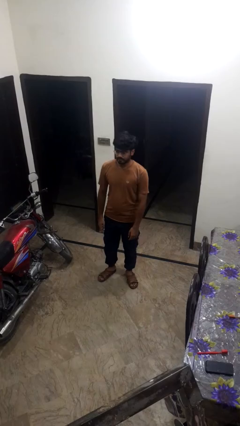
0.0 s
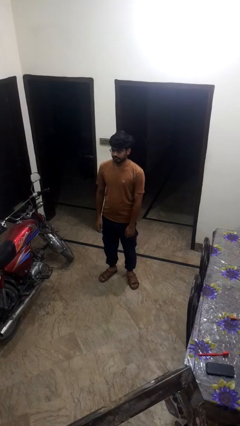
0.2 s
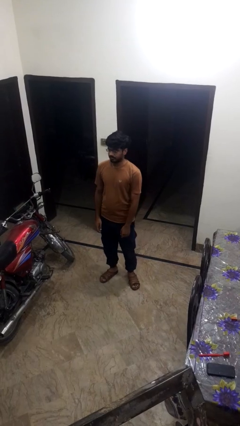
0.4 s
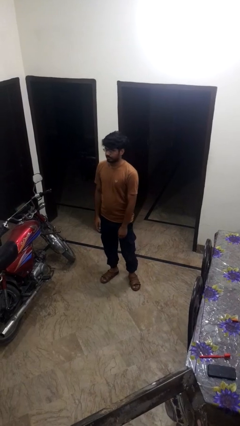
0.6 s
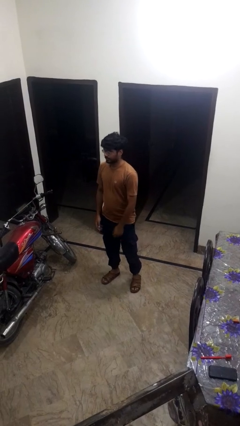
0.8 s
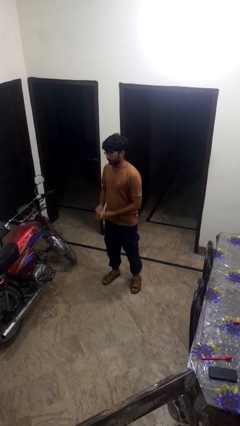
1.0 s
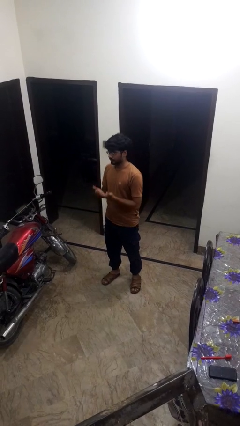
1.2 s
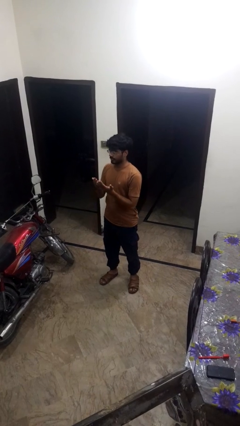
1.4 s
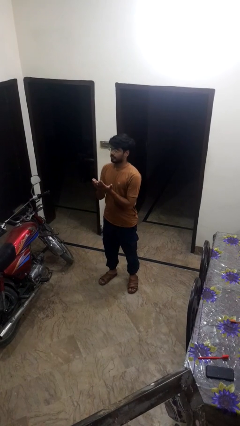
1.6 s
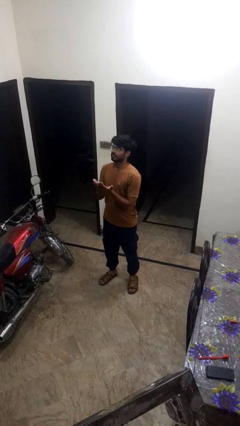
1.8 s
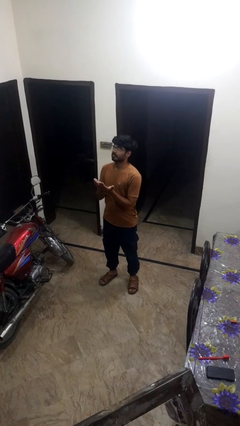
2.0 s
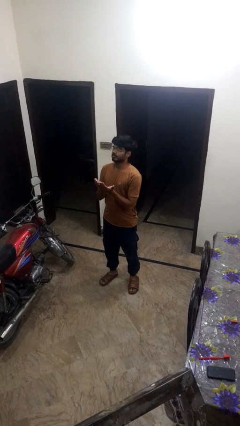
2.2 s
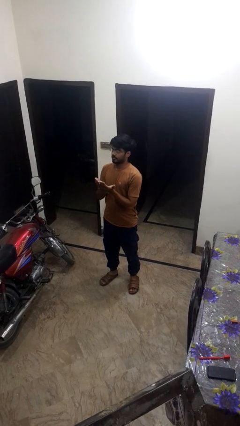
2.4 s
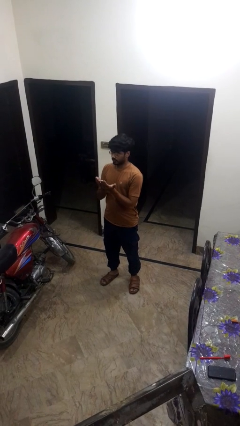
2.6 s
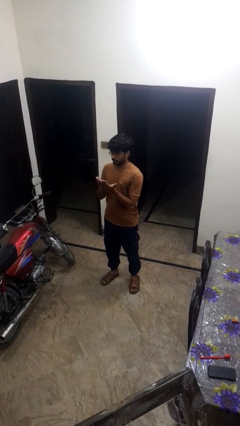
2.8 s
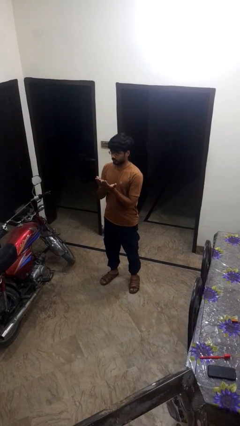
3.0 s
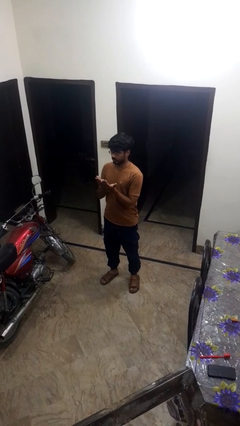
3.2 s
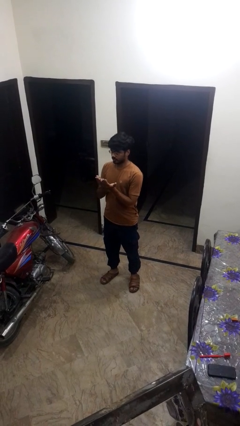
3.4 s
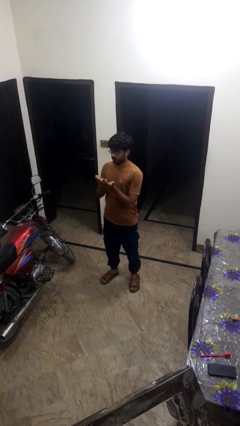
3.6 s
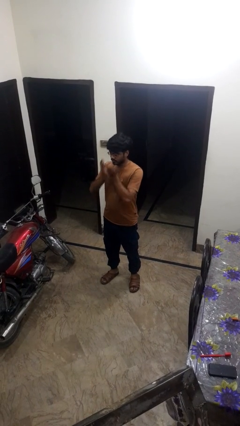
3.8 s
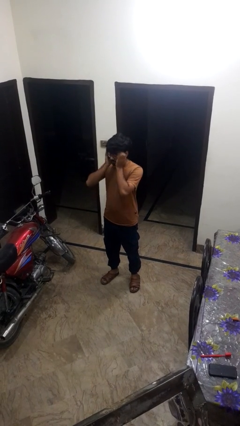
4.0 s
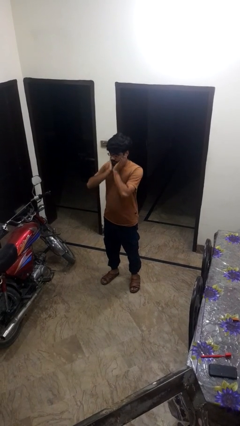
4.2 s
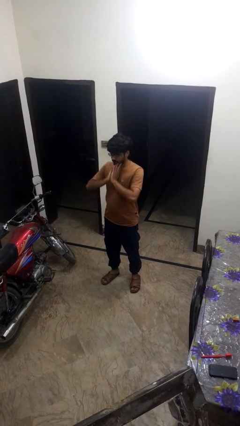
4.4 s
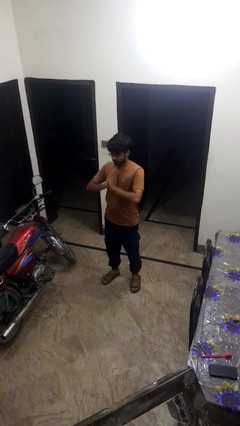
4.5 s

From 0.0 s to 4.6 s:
person prays

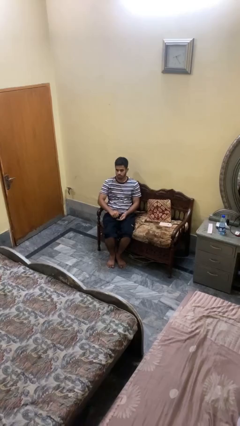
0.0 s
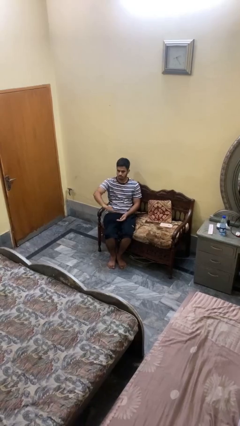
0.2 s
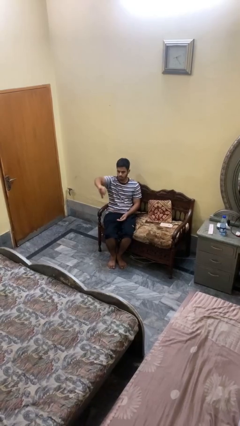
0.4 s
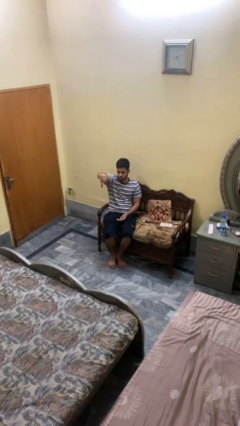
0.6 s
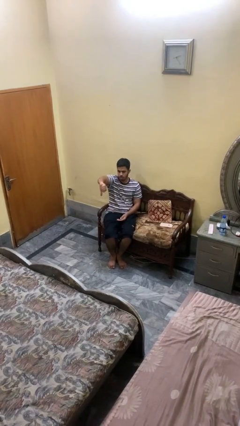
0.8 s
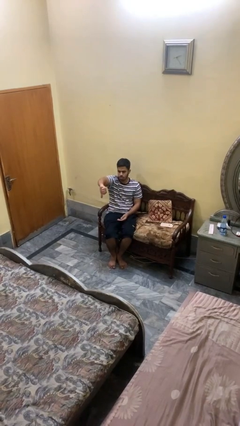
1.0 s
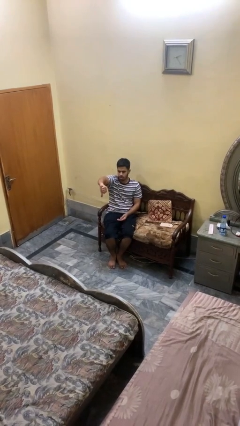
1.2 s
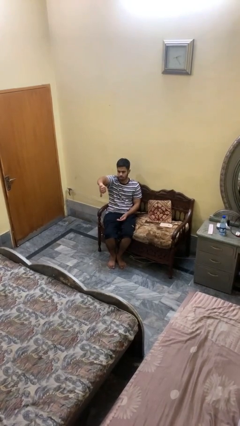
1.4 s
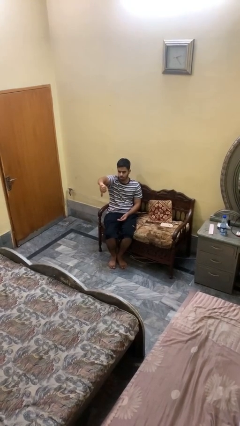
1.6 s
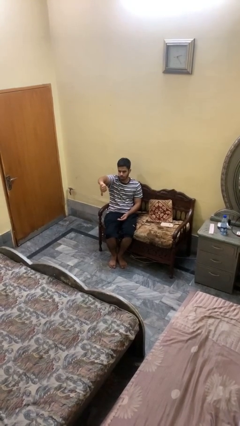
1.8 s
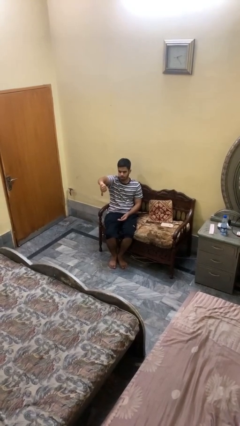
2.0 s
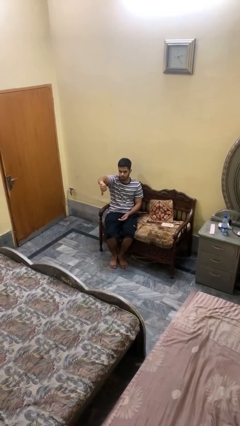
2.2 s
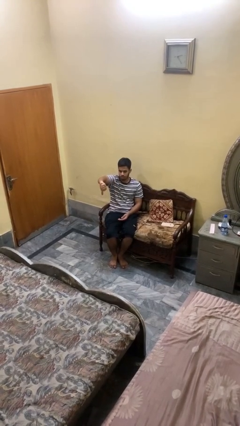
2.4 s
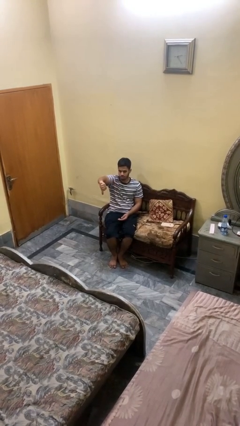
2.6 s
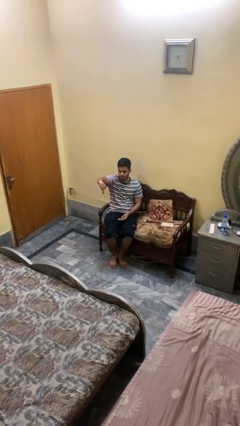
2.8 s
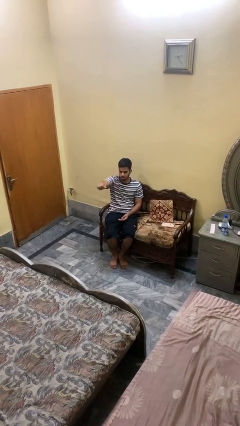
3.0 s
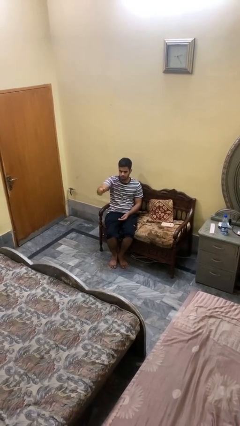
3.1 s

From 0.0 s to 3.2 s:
person gestures thumbs down

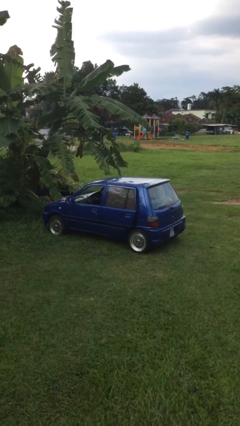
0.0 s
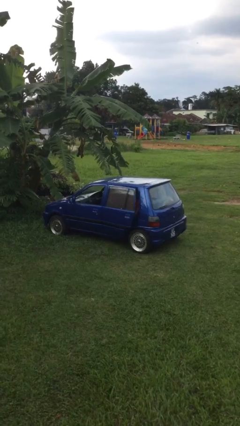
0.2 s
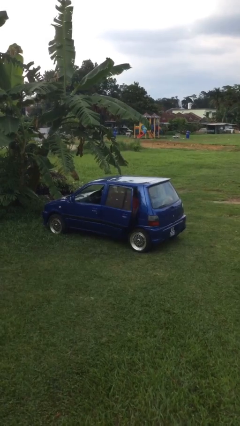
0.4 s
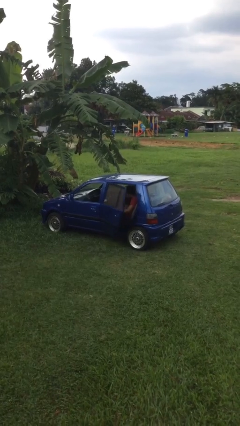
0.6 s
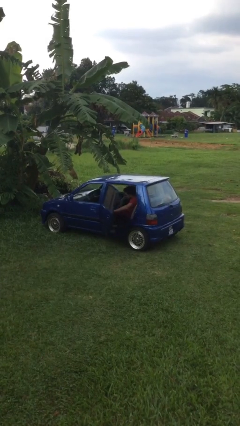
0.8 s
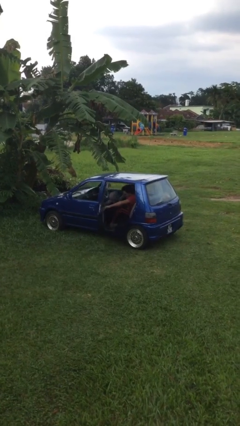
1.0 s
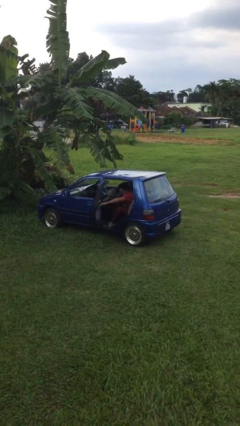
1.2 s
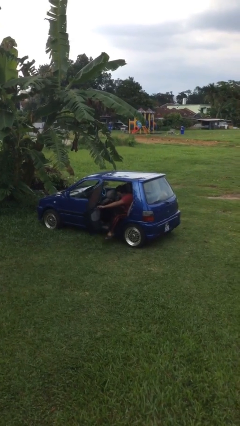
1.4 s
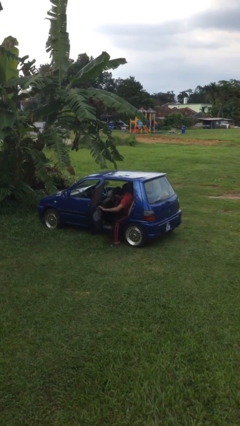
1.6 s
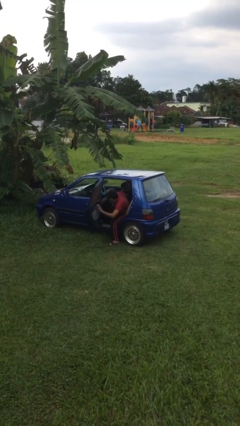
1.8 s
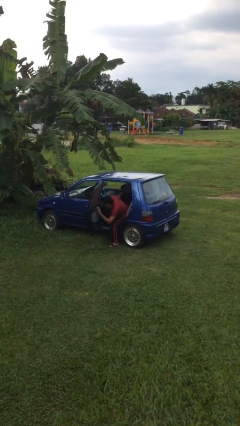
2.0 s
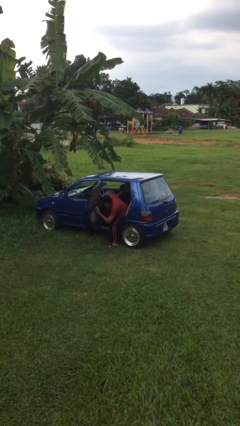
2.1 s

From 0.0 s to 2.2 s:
person opens car door

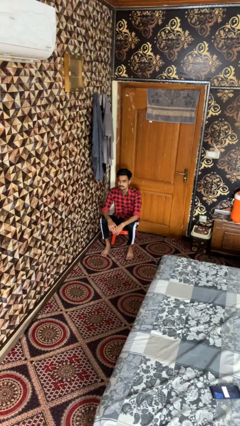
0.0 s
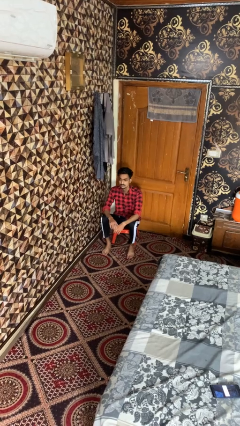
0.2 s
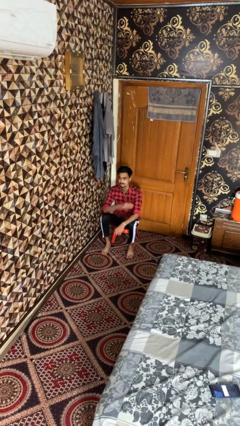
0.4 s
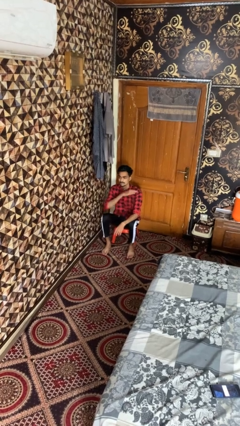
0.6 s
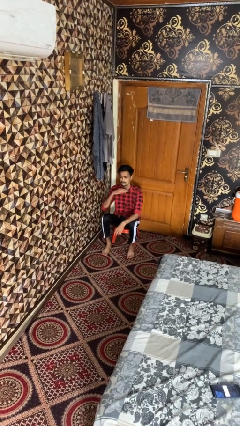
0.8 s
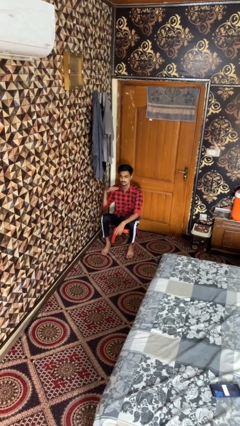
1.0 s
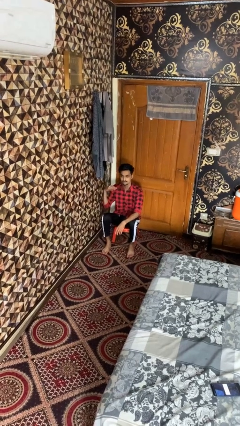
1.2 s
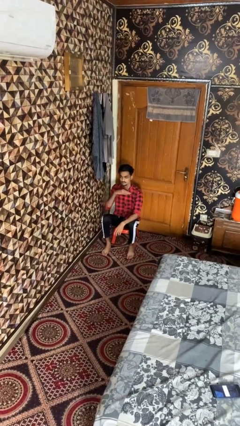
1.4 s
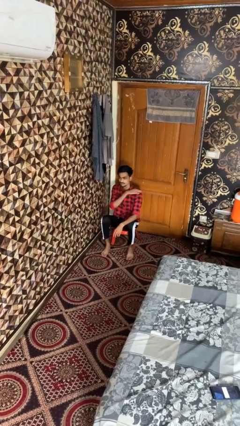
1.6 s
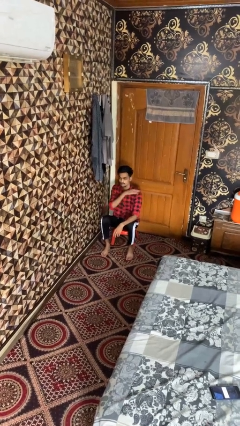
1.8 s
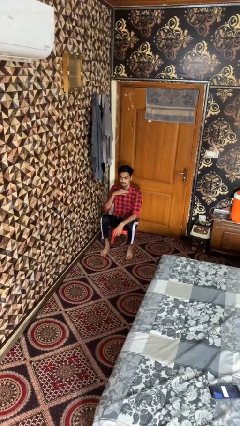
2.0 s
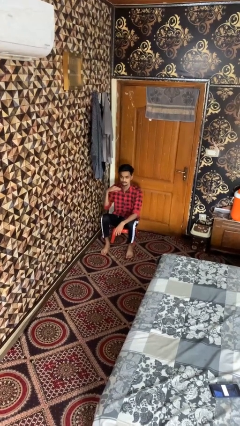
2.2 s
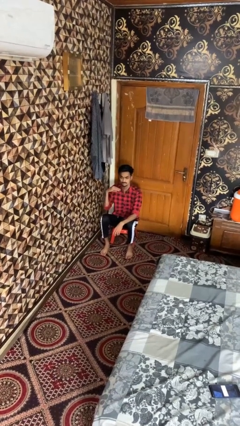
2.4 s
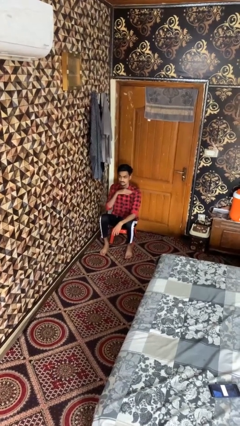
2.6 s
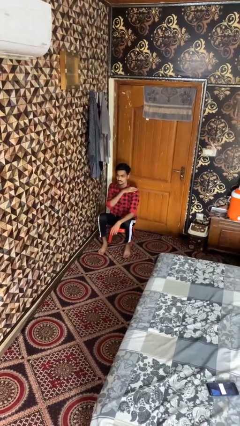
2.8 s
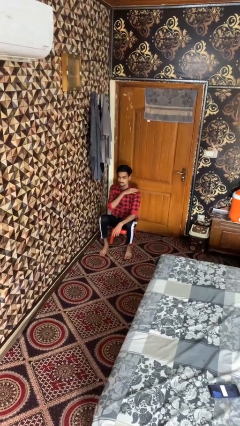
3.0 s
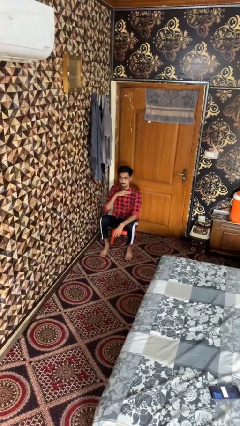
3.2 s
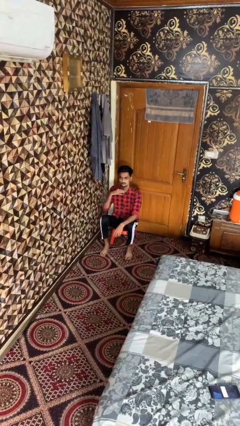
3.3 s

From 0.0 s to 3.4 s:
person gestures cut

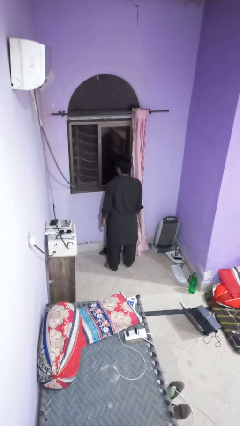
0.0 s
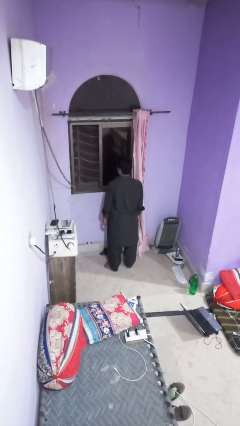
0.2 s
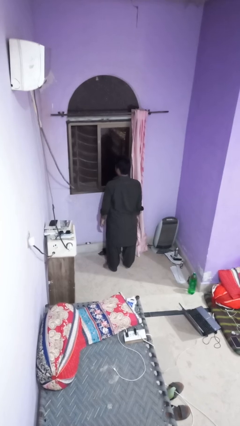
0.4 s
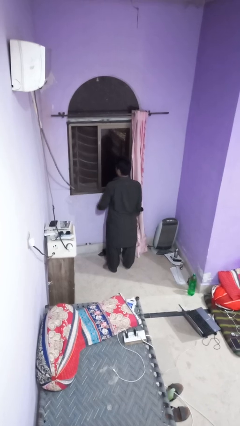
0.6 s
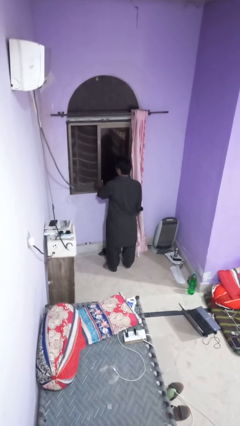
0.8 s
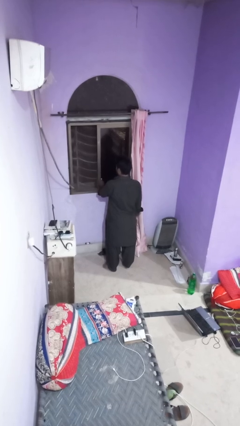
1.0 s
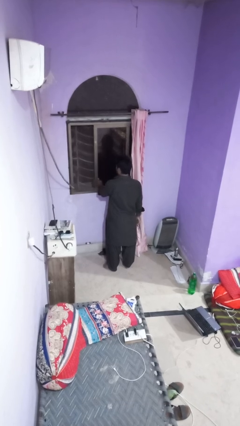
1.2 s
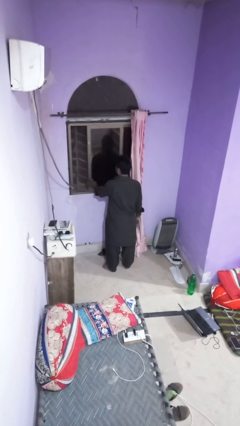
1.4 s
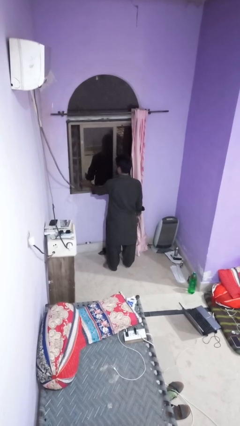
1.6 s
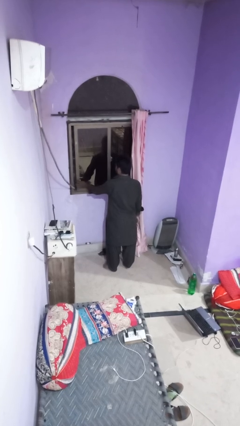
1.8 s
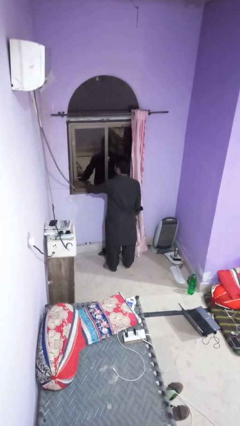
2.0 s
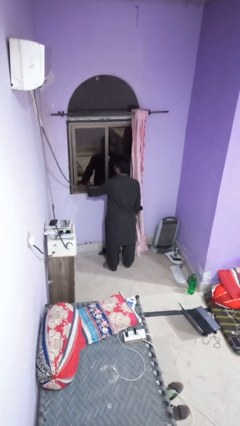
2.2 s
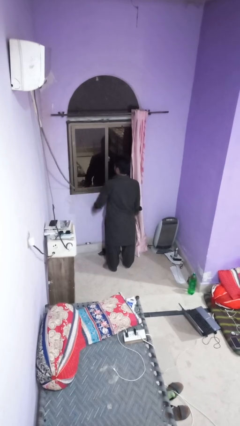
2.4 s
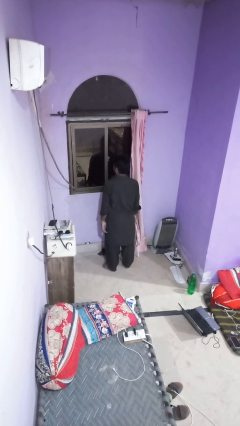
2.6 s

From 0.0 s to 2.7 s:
person closes home window

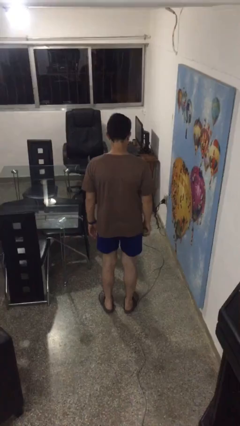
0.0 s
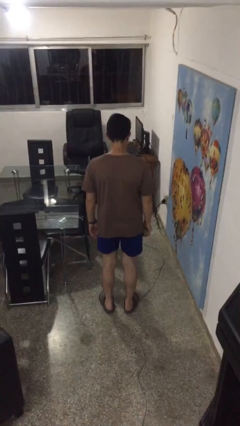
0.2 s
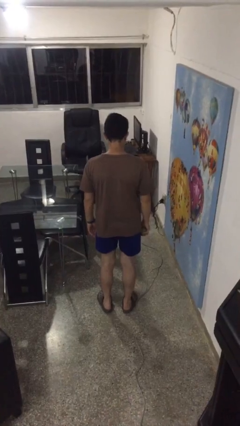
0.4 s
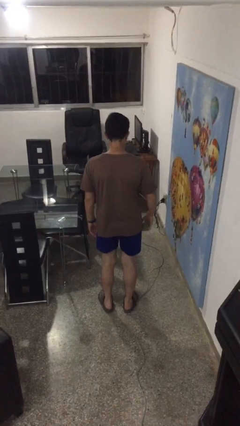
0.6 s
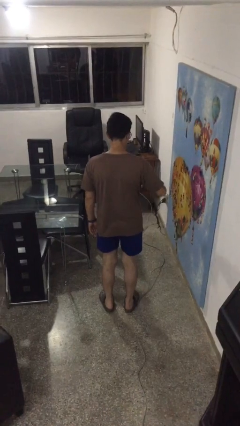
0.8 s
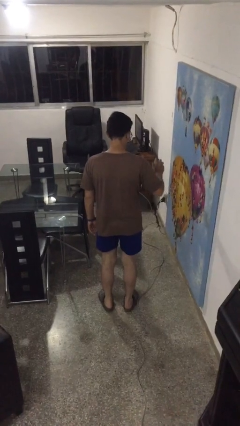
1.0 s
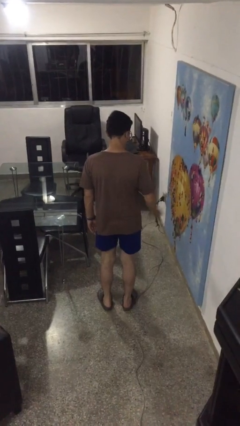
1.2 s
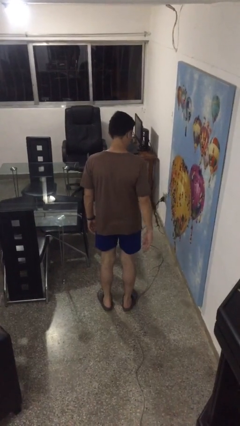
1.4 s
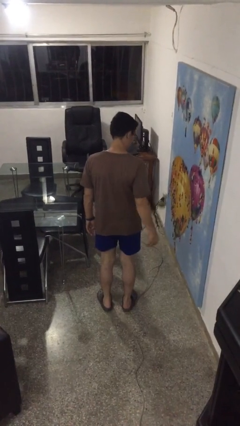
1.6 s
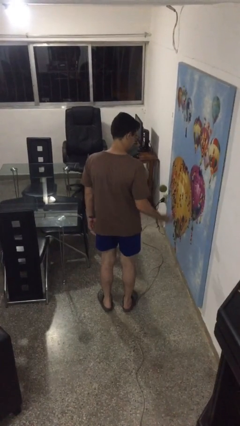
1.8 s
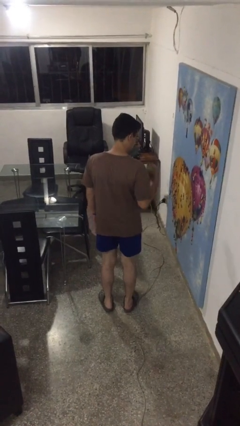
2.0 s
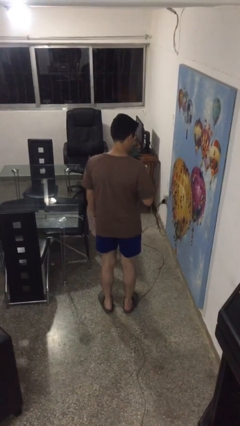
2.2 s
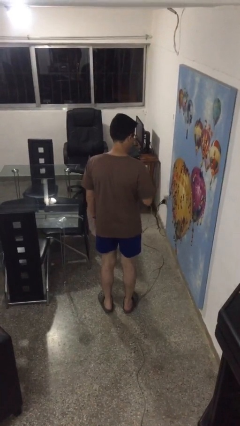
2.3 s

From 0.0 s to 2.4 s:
person bounces ball on floor
